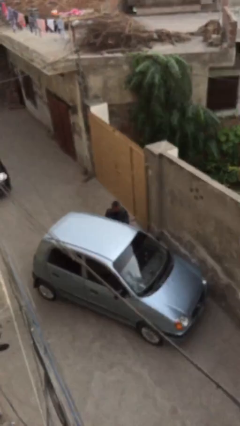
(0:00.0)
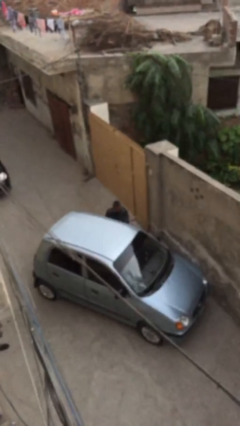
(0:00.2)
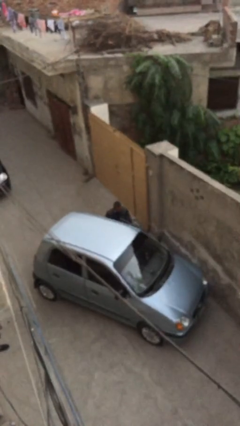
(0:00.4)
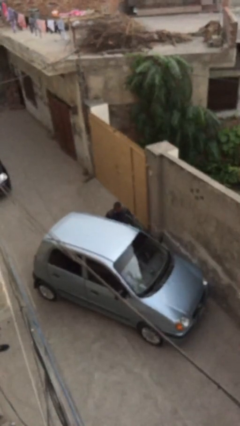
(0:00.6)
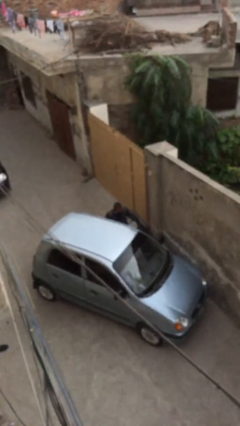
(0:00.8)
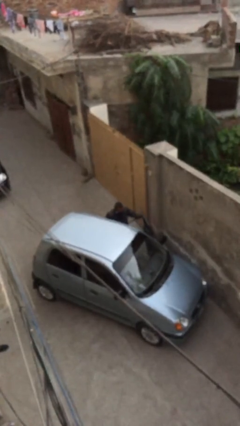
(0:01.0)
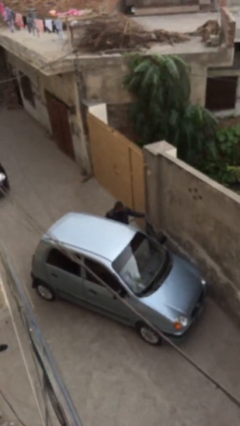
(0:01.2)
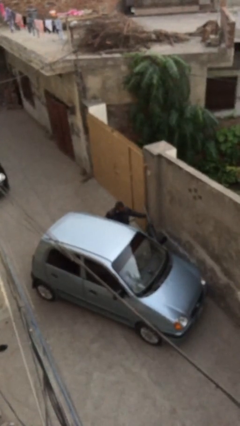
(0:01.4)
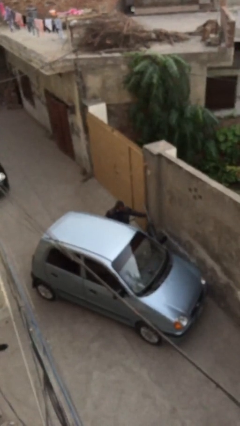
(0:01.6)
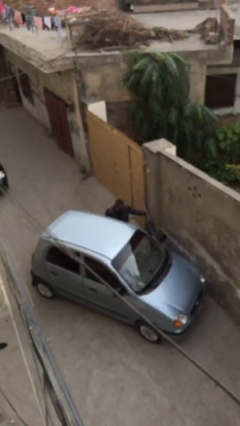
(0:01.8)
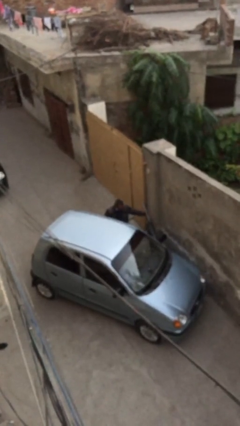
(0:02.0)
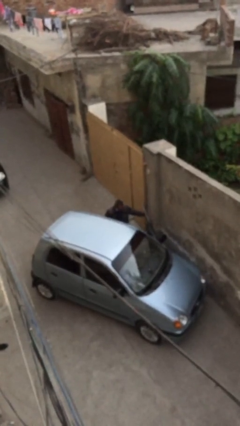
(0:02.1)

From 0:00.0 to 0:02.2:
person opens car door

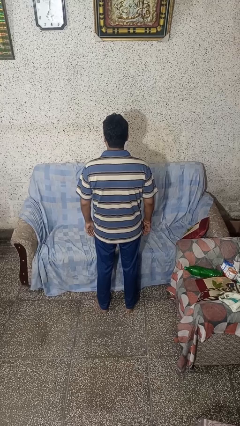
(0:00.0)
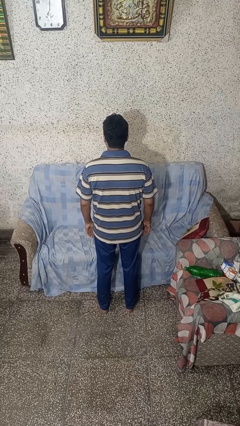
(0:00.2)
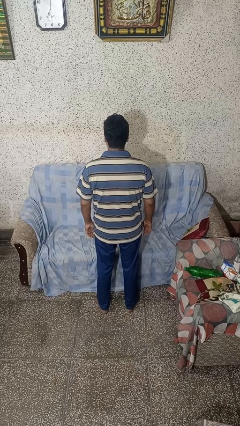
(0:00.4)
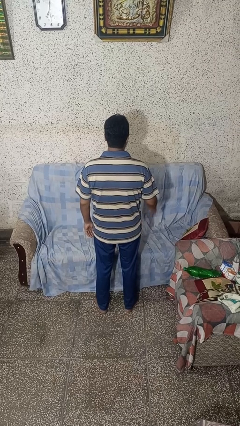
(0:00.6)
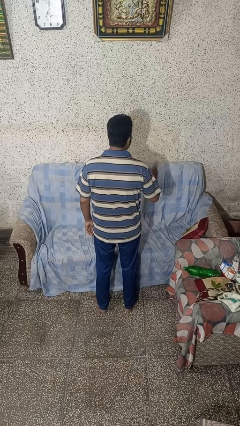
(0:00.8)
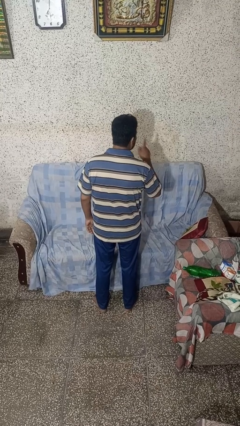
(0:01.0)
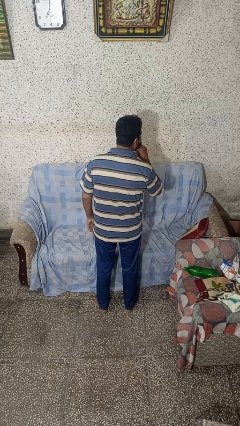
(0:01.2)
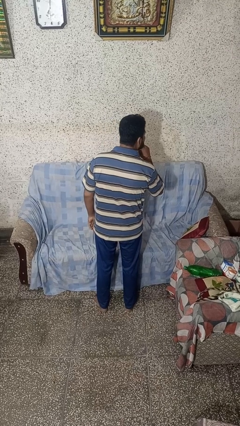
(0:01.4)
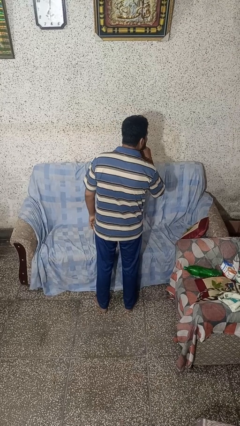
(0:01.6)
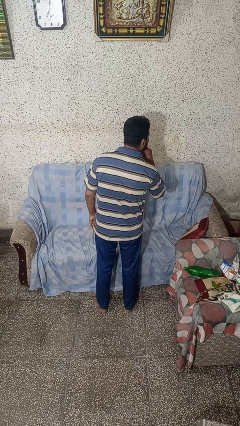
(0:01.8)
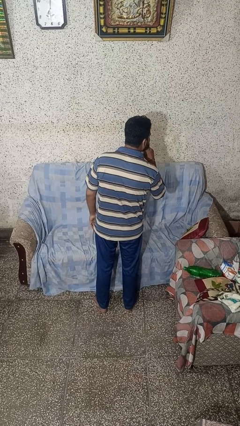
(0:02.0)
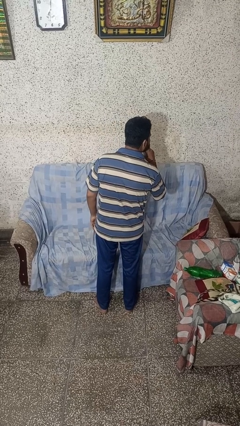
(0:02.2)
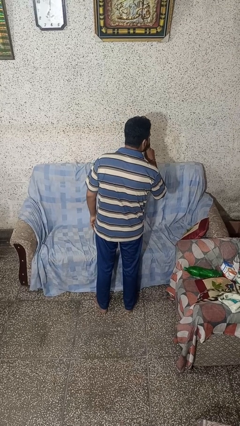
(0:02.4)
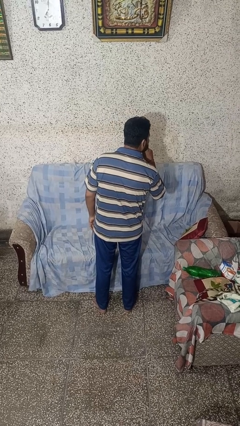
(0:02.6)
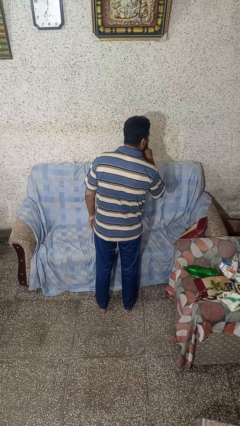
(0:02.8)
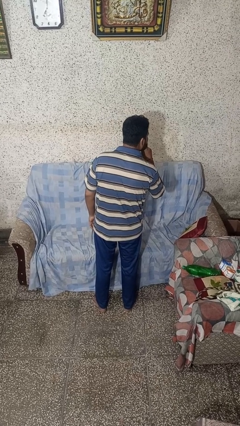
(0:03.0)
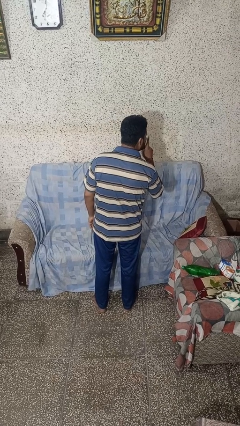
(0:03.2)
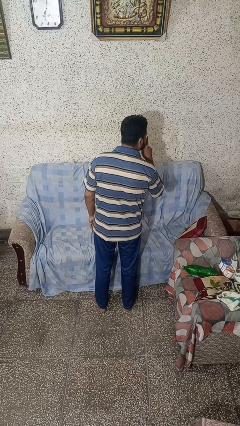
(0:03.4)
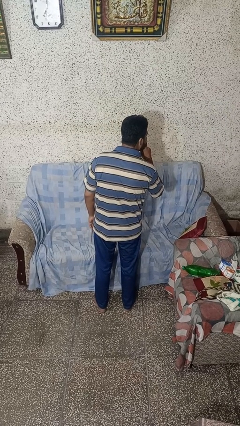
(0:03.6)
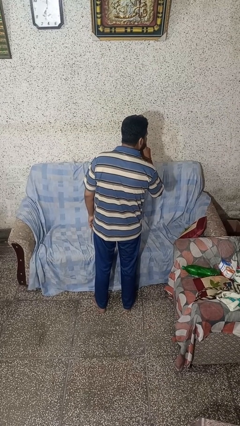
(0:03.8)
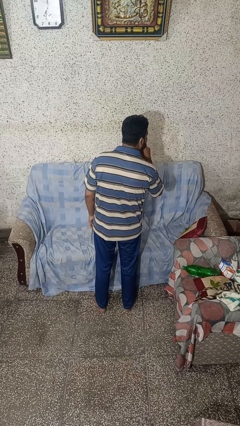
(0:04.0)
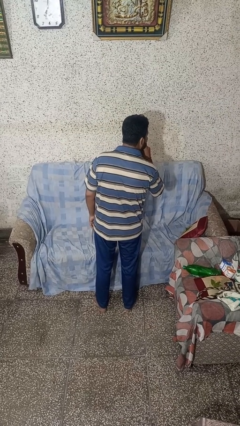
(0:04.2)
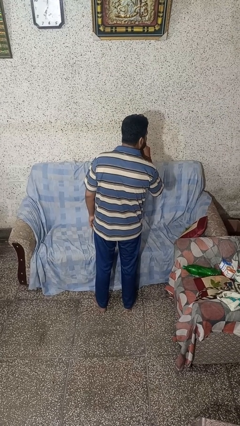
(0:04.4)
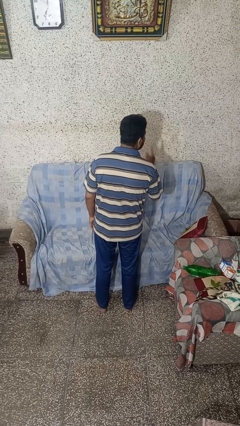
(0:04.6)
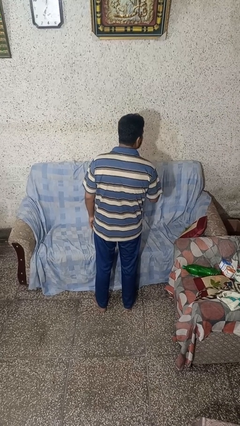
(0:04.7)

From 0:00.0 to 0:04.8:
person gestures be quiet

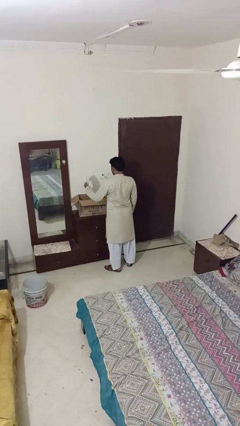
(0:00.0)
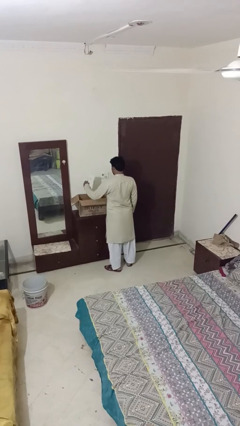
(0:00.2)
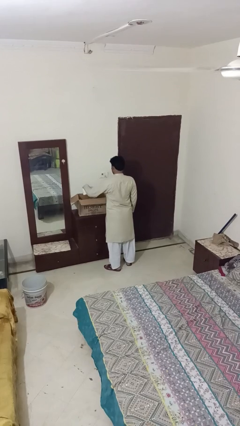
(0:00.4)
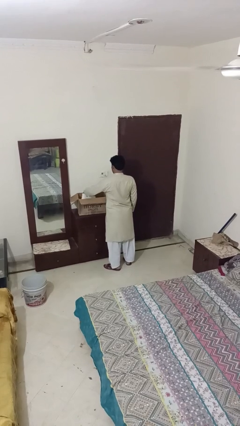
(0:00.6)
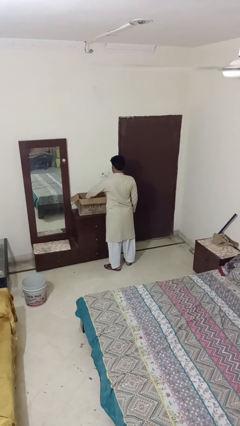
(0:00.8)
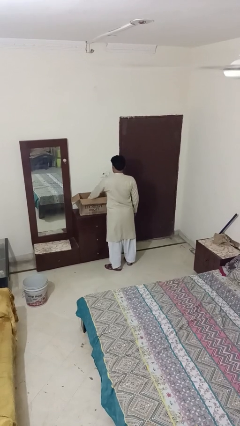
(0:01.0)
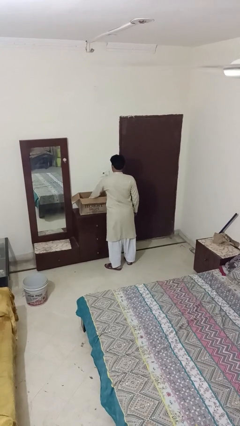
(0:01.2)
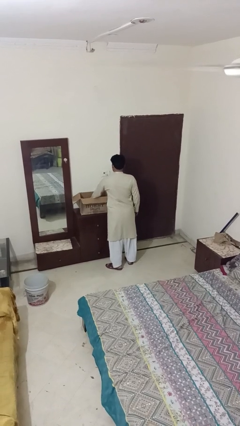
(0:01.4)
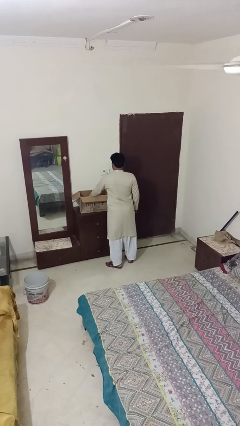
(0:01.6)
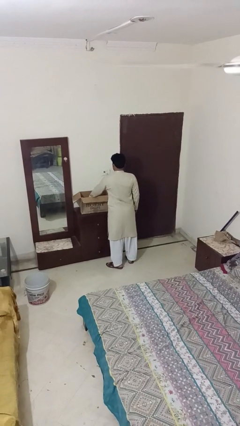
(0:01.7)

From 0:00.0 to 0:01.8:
person puts object into box

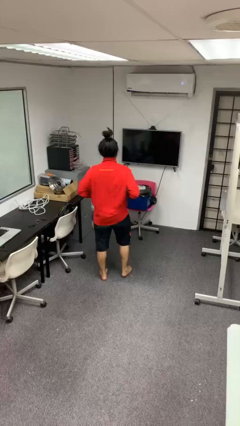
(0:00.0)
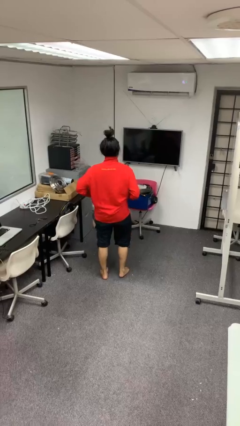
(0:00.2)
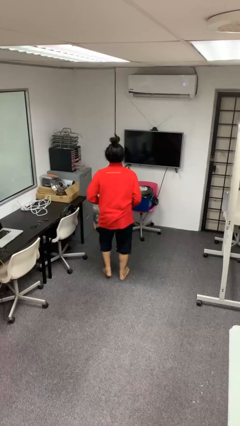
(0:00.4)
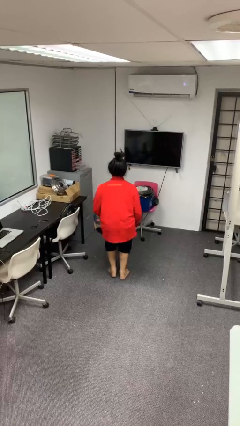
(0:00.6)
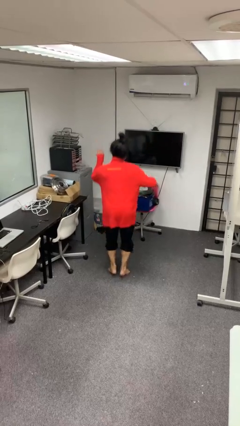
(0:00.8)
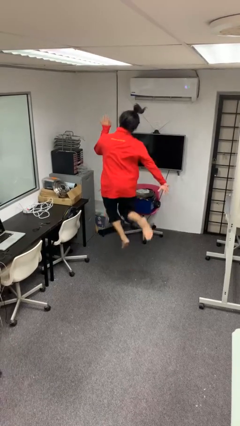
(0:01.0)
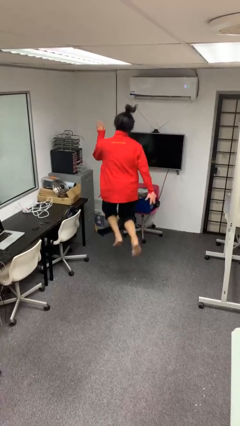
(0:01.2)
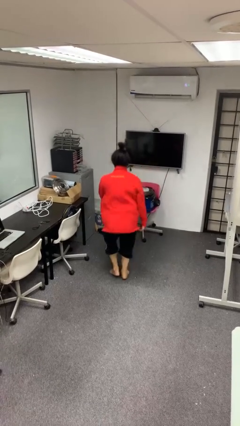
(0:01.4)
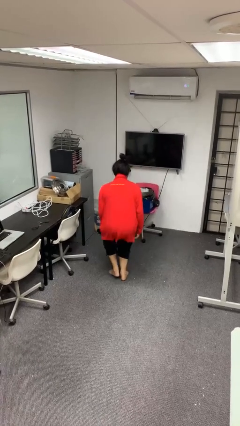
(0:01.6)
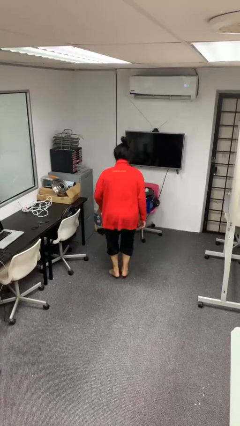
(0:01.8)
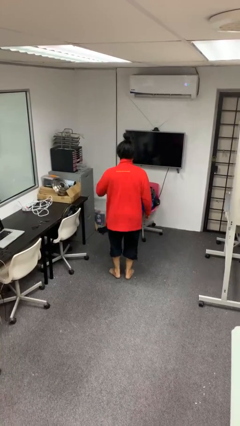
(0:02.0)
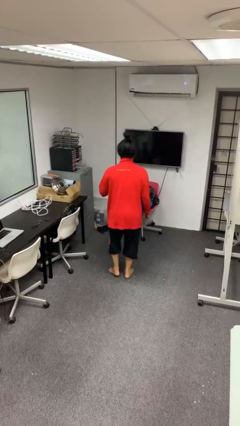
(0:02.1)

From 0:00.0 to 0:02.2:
person jumps

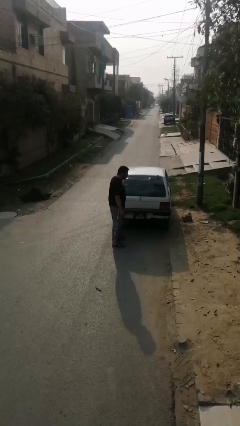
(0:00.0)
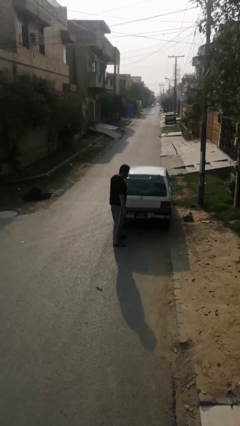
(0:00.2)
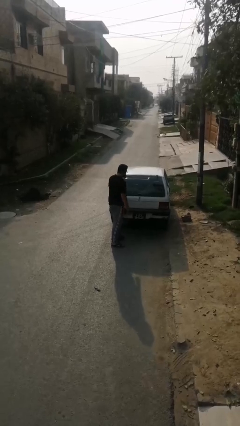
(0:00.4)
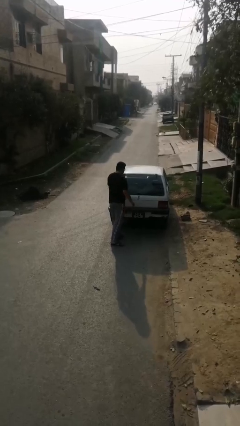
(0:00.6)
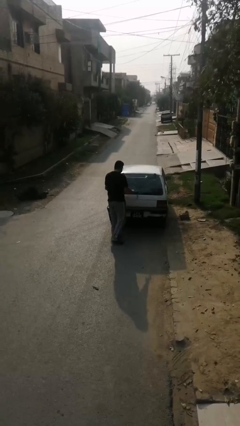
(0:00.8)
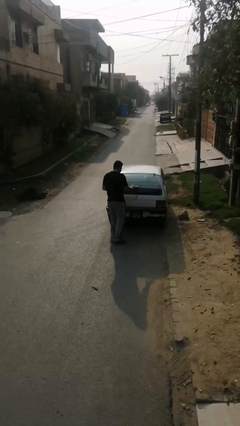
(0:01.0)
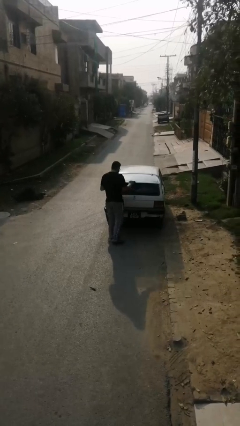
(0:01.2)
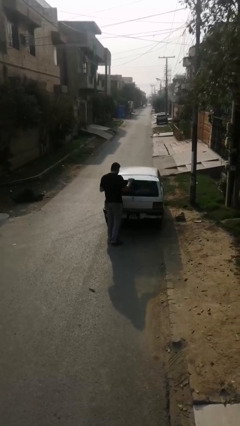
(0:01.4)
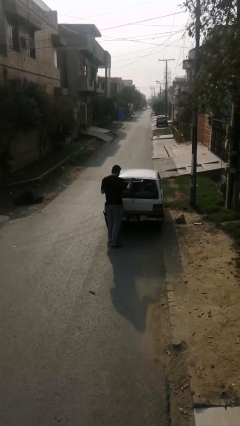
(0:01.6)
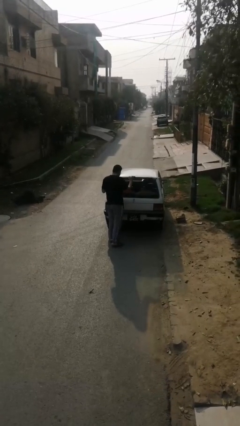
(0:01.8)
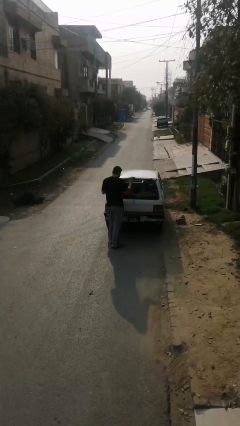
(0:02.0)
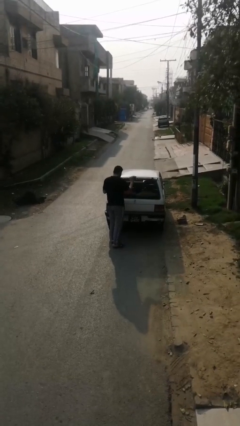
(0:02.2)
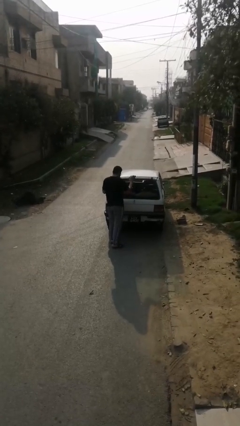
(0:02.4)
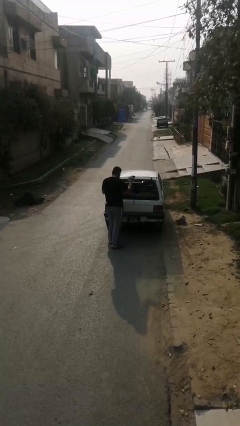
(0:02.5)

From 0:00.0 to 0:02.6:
person opens car trunk

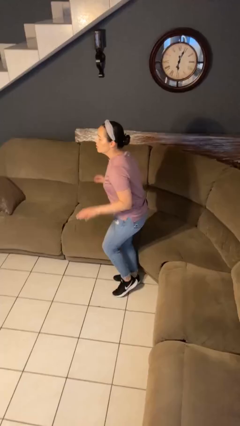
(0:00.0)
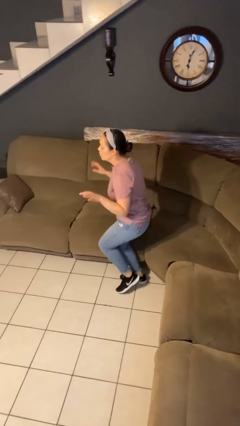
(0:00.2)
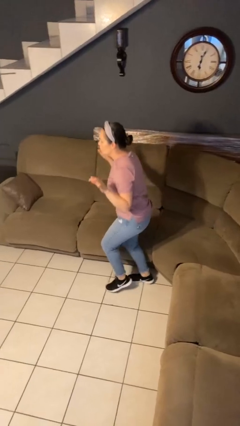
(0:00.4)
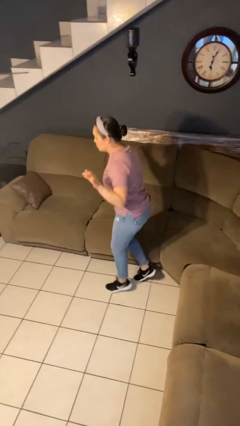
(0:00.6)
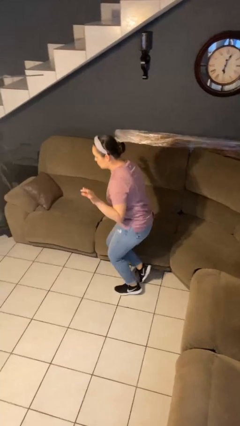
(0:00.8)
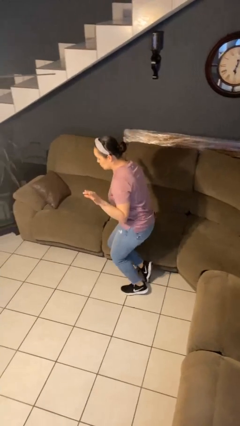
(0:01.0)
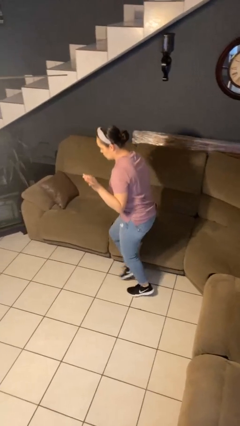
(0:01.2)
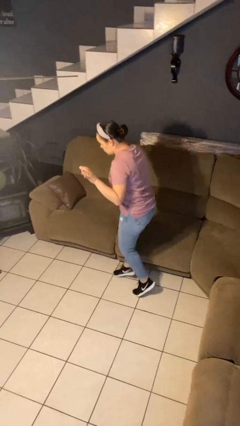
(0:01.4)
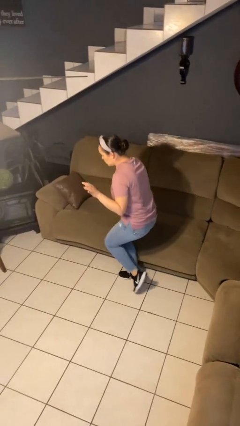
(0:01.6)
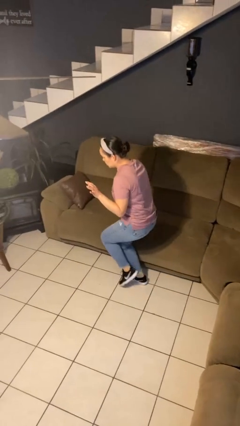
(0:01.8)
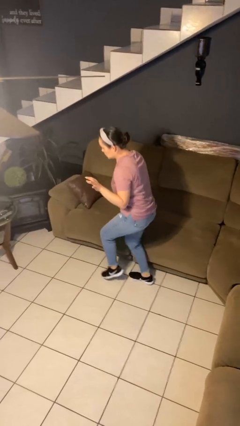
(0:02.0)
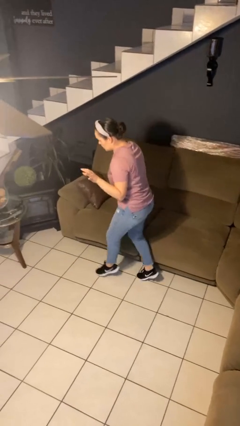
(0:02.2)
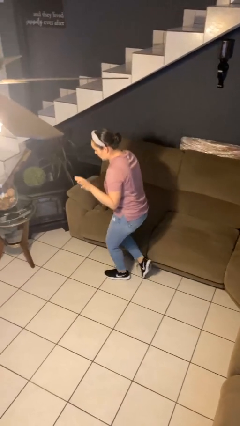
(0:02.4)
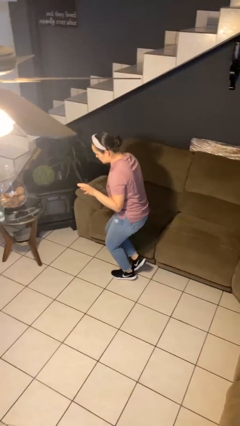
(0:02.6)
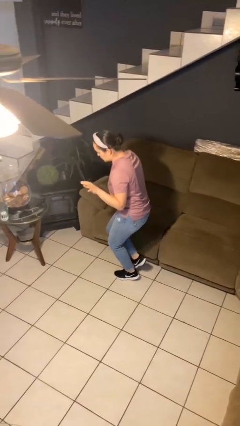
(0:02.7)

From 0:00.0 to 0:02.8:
person walks tiptoe

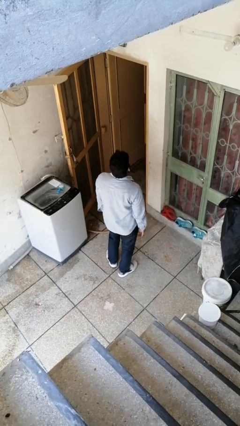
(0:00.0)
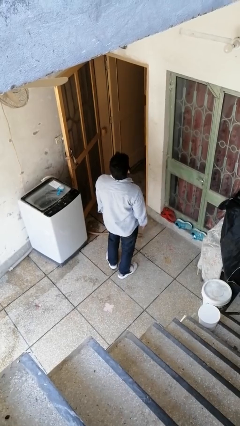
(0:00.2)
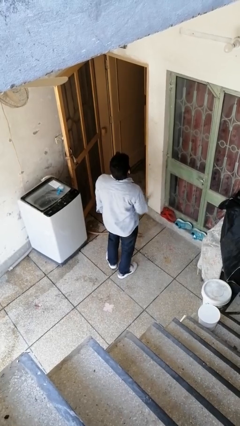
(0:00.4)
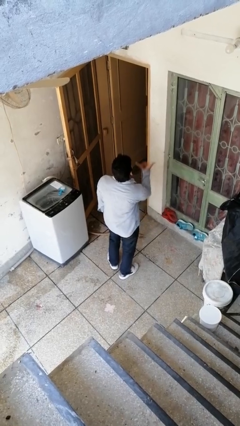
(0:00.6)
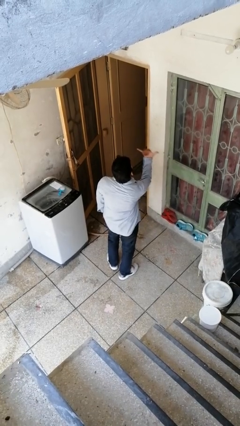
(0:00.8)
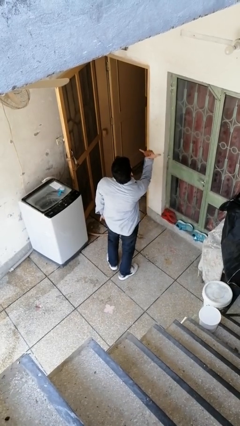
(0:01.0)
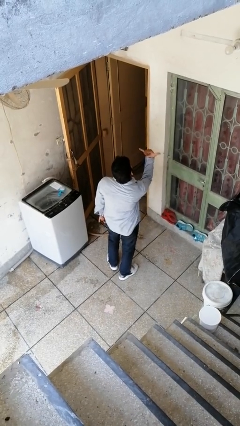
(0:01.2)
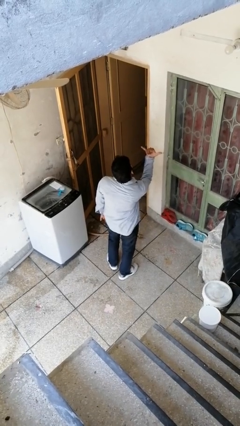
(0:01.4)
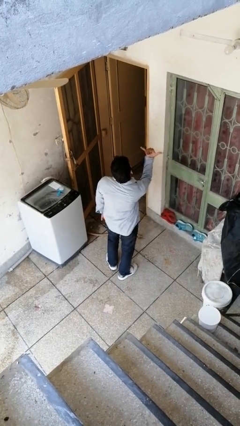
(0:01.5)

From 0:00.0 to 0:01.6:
person gestures hang loose
